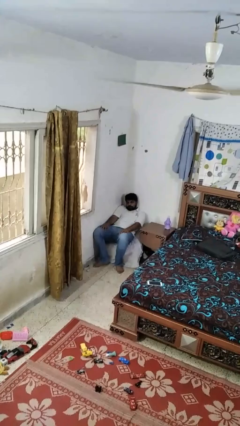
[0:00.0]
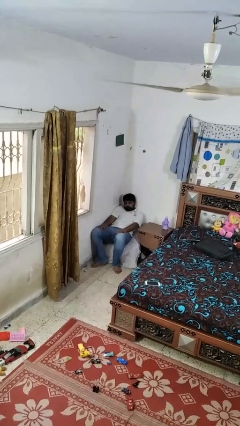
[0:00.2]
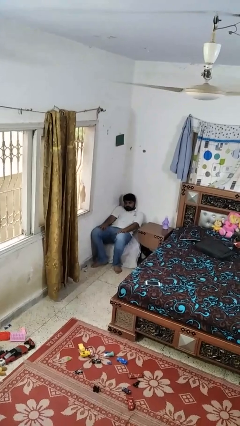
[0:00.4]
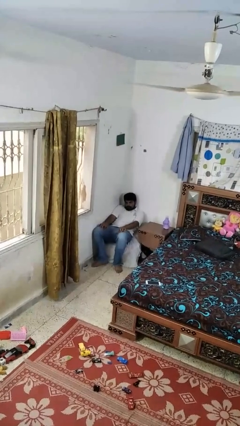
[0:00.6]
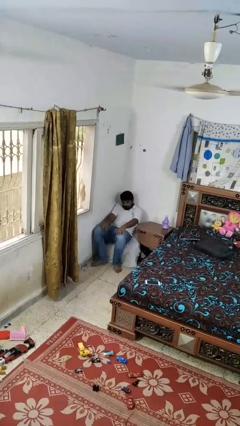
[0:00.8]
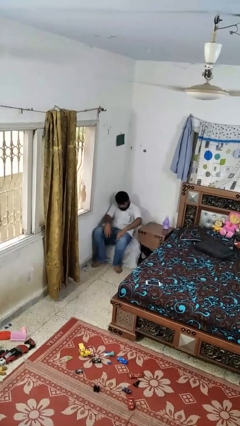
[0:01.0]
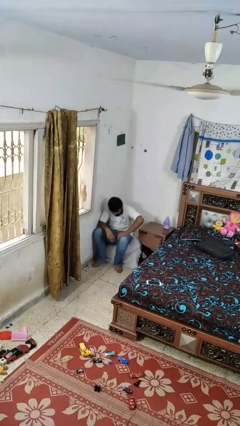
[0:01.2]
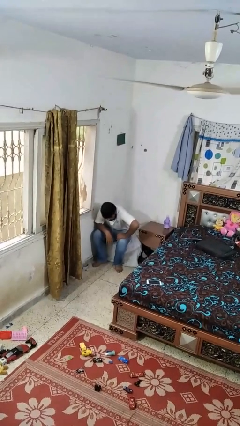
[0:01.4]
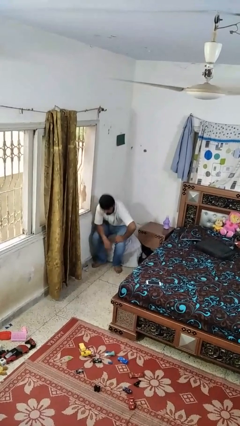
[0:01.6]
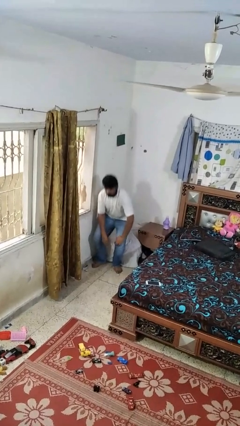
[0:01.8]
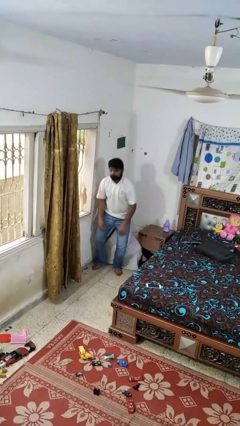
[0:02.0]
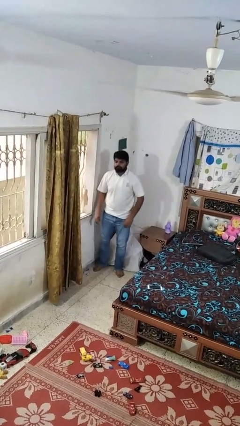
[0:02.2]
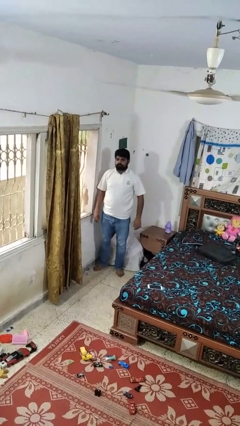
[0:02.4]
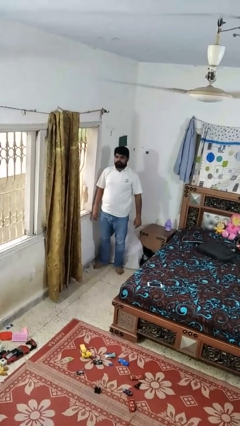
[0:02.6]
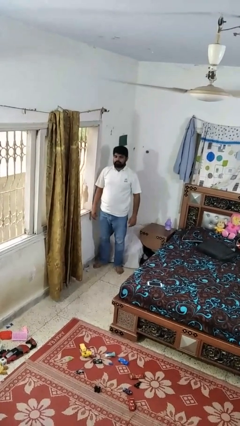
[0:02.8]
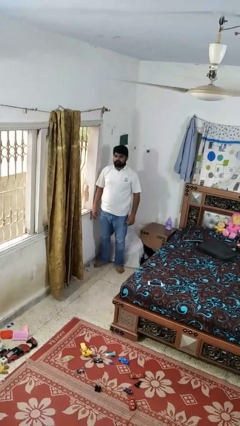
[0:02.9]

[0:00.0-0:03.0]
person stands up

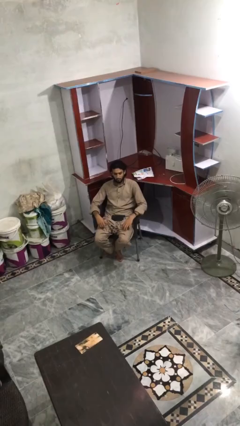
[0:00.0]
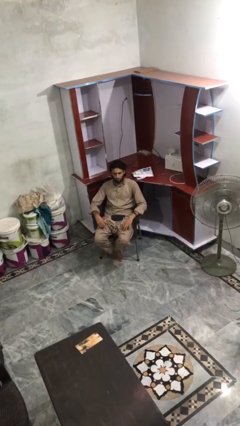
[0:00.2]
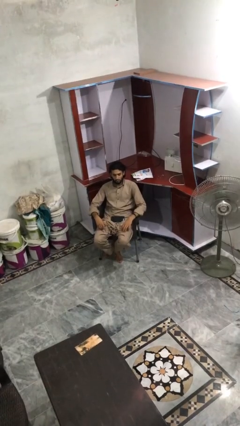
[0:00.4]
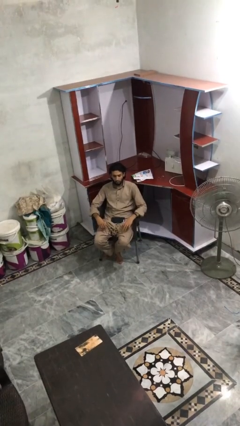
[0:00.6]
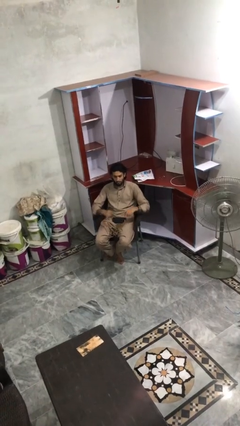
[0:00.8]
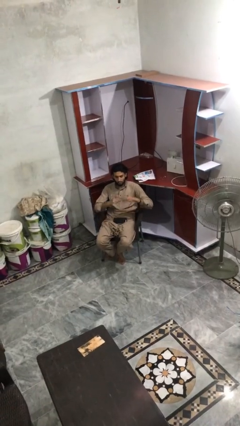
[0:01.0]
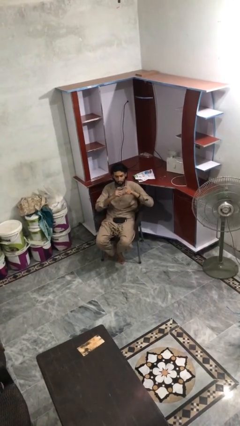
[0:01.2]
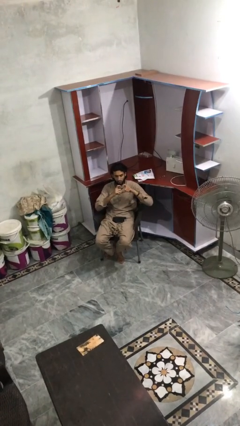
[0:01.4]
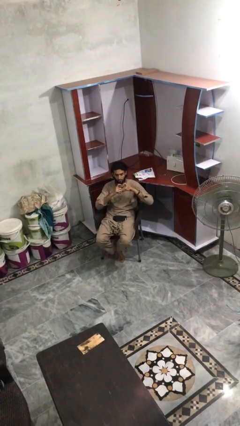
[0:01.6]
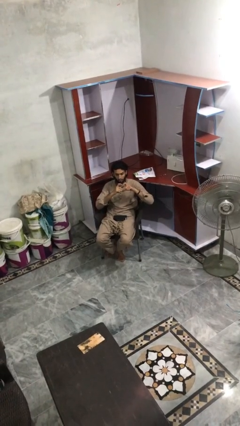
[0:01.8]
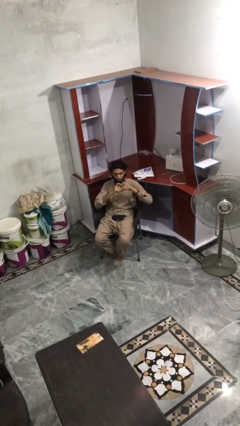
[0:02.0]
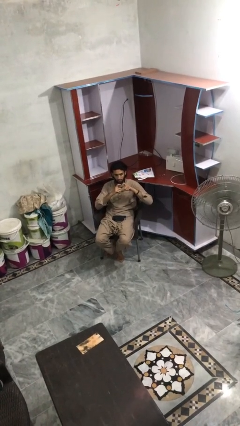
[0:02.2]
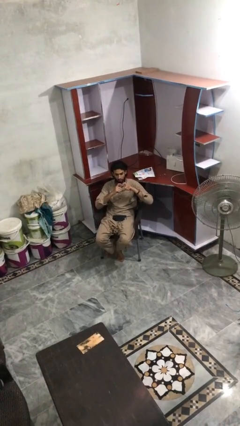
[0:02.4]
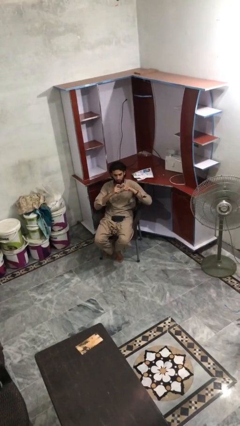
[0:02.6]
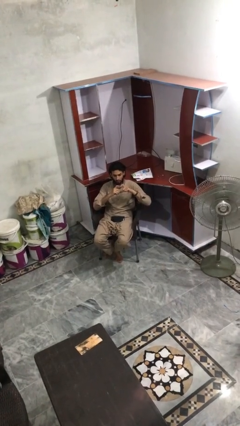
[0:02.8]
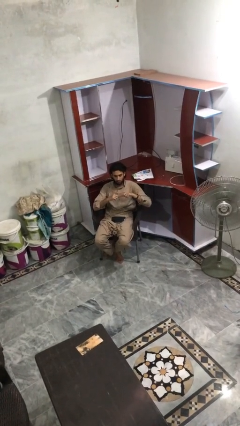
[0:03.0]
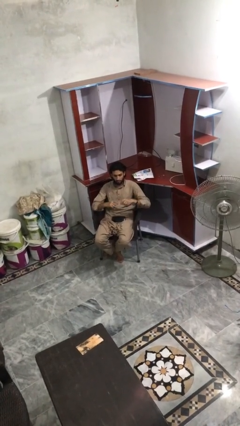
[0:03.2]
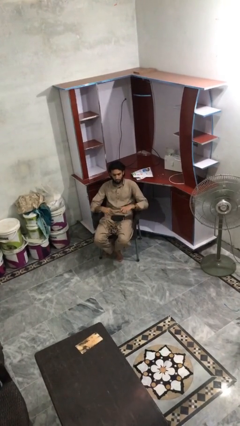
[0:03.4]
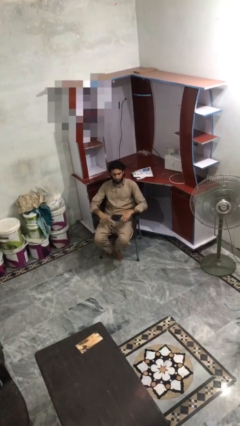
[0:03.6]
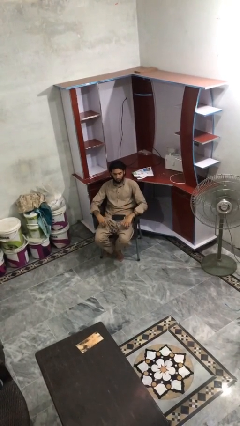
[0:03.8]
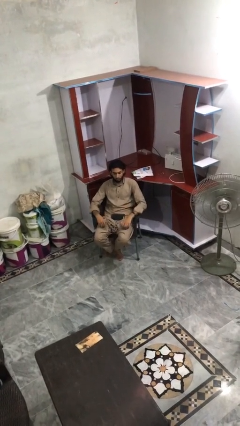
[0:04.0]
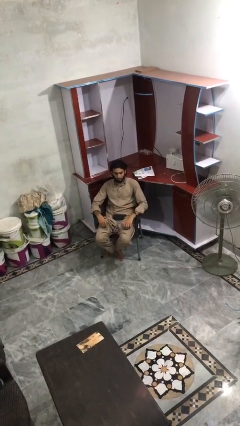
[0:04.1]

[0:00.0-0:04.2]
person gestures heart

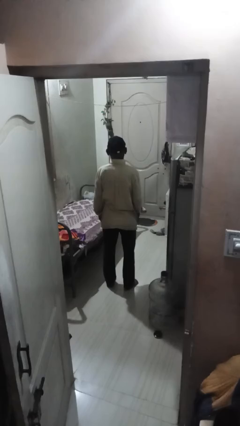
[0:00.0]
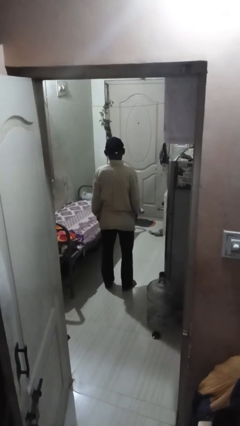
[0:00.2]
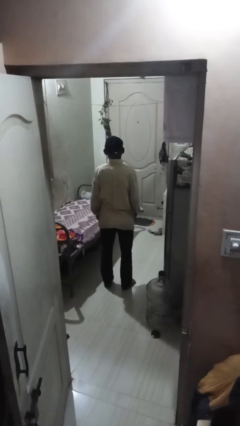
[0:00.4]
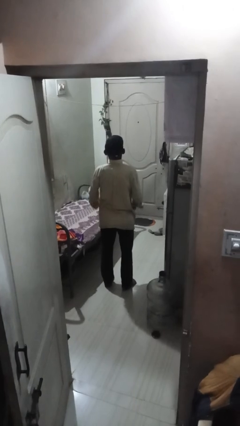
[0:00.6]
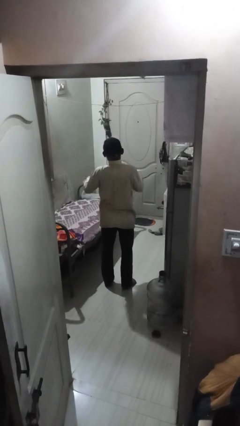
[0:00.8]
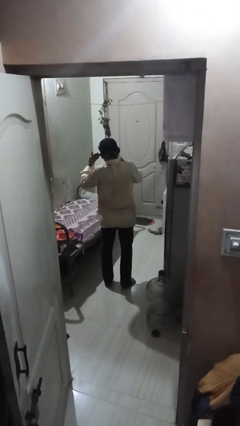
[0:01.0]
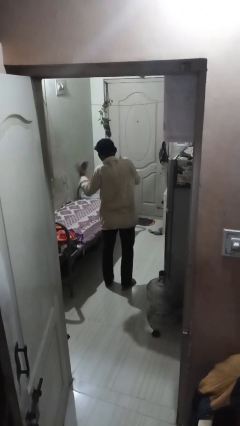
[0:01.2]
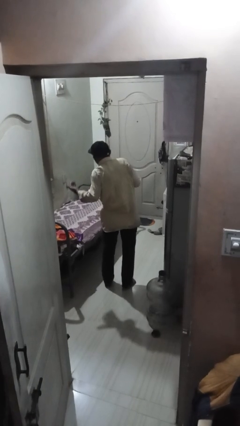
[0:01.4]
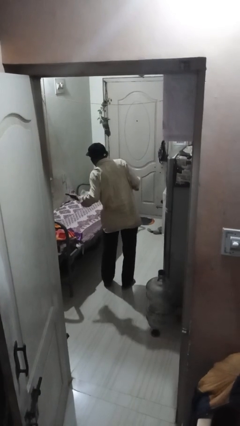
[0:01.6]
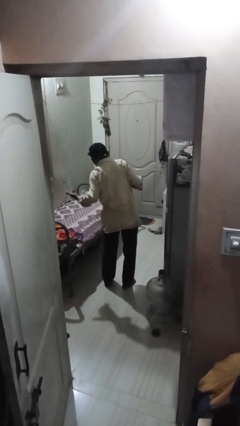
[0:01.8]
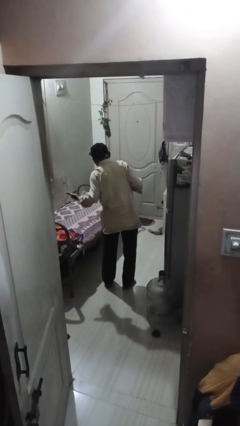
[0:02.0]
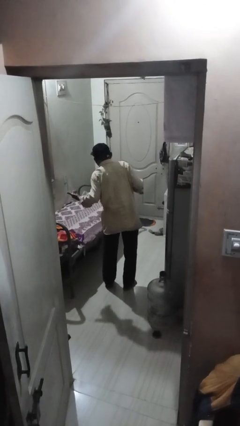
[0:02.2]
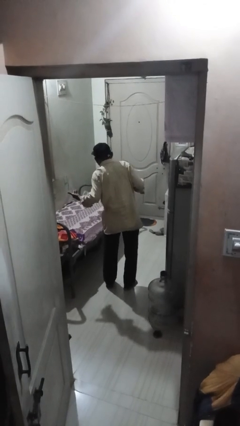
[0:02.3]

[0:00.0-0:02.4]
person shrugs

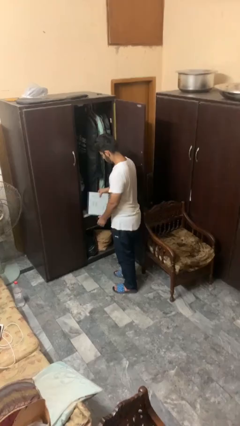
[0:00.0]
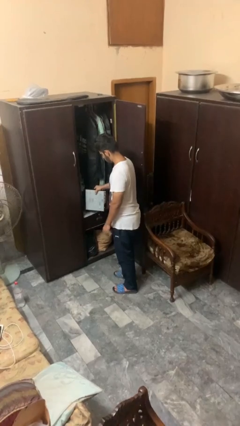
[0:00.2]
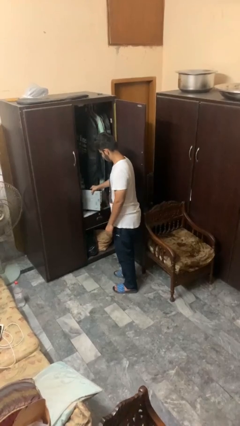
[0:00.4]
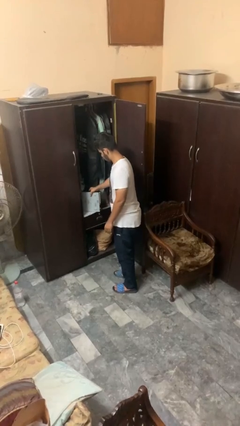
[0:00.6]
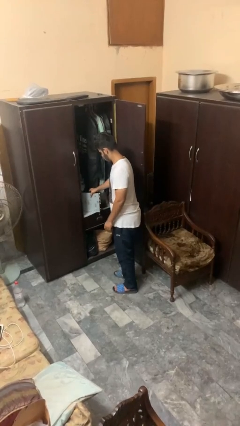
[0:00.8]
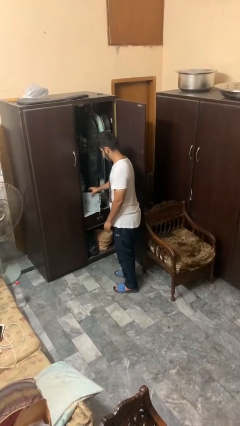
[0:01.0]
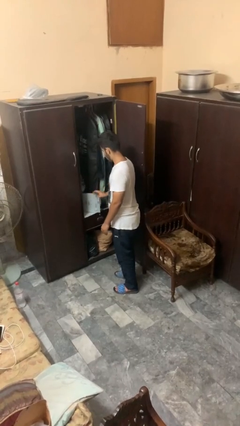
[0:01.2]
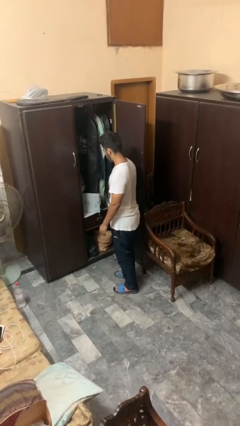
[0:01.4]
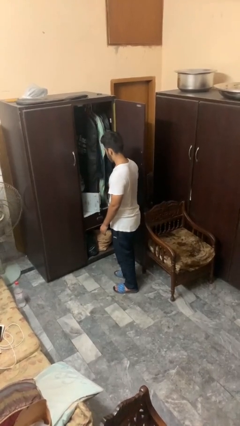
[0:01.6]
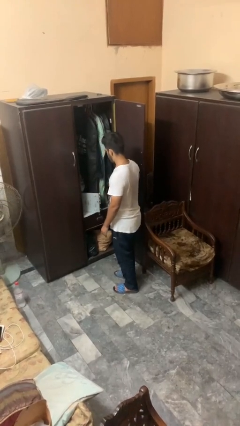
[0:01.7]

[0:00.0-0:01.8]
person puts down object on countertop

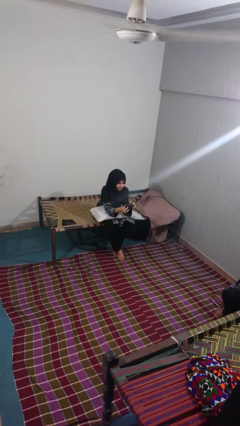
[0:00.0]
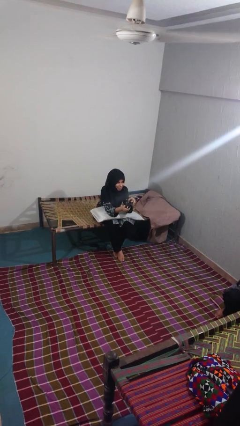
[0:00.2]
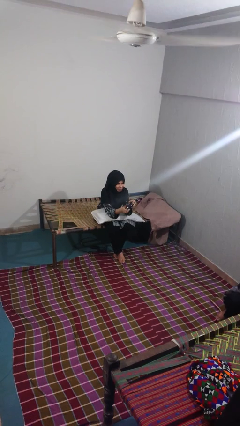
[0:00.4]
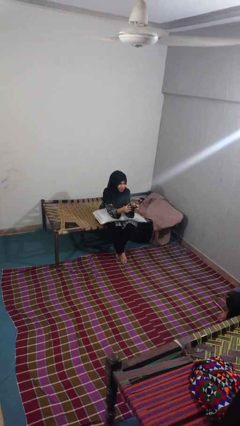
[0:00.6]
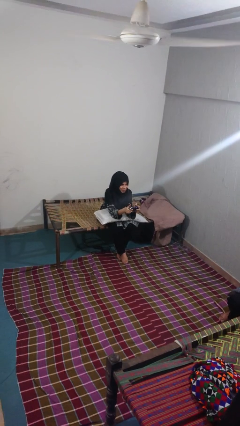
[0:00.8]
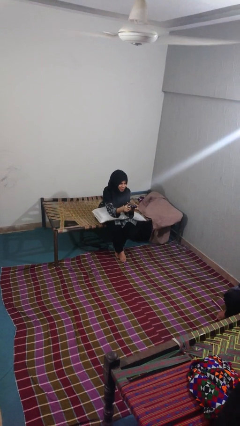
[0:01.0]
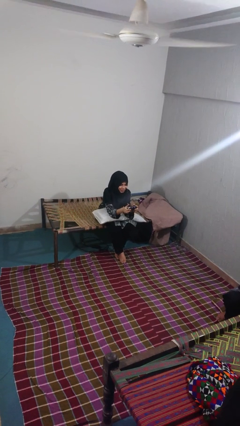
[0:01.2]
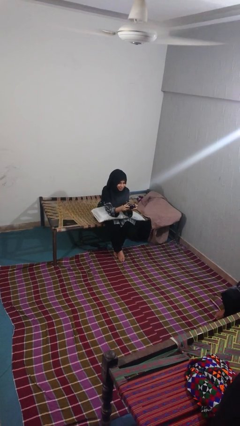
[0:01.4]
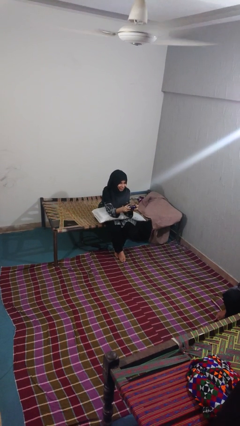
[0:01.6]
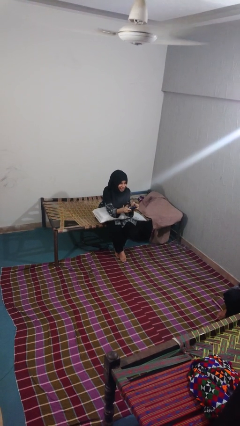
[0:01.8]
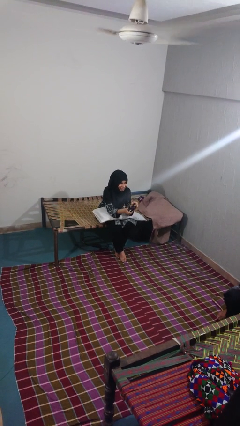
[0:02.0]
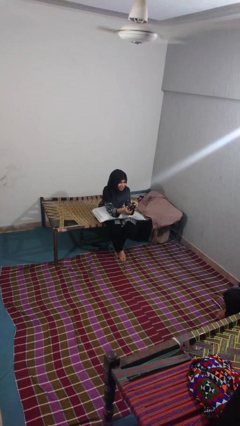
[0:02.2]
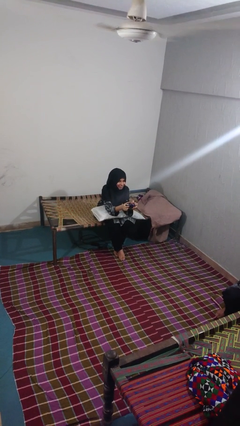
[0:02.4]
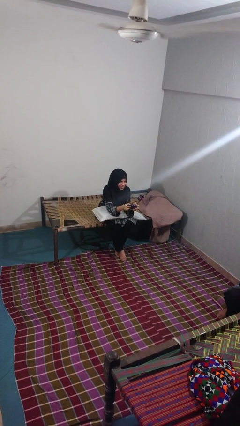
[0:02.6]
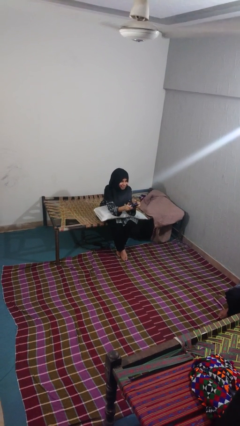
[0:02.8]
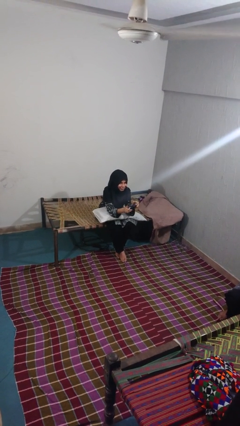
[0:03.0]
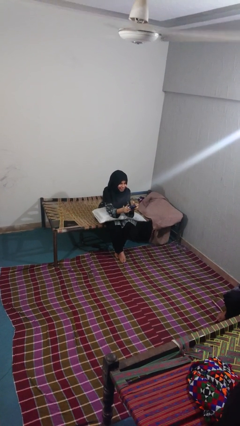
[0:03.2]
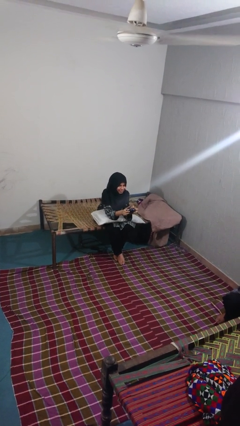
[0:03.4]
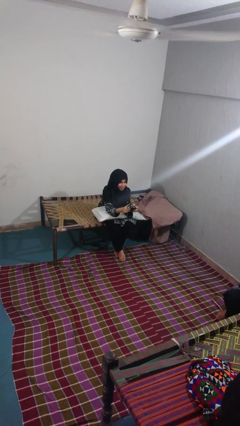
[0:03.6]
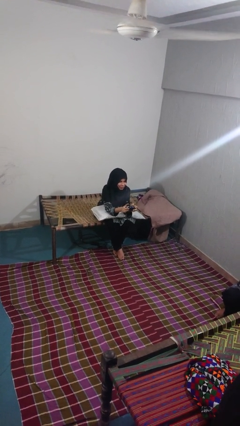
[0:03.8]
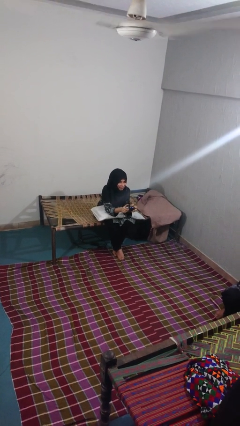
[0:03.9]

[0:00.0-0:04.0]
person interacts with handheld game

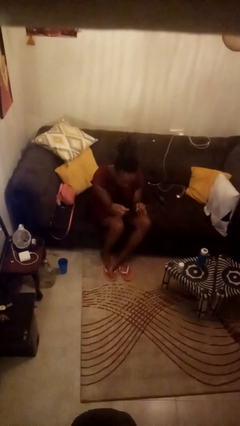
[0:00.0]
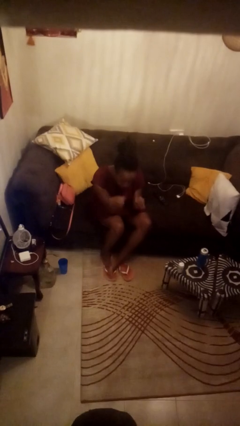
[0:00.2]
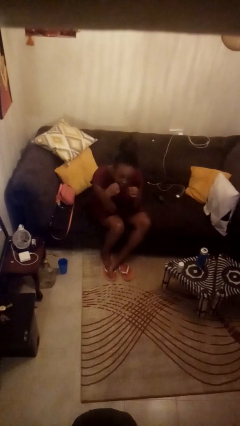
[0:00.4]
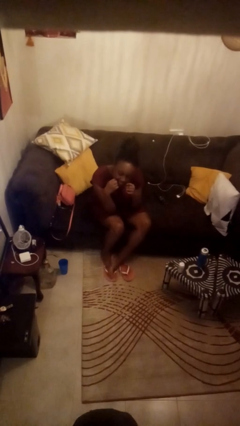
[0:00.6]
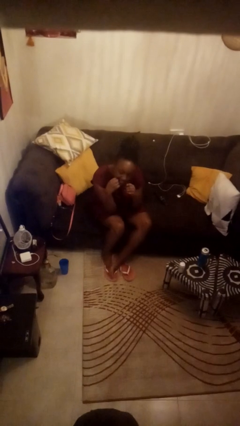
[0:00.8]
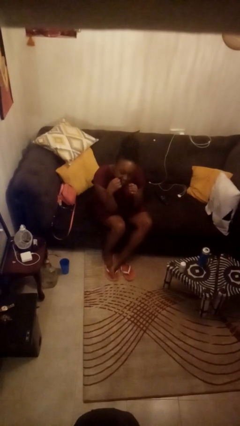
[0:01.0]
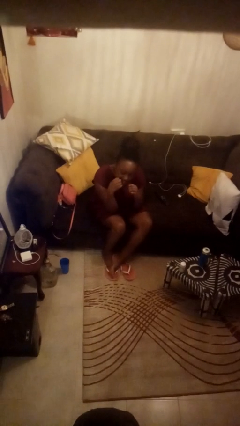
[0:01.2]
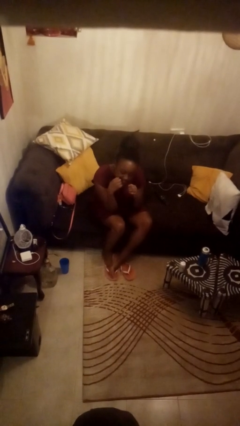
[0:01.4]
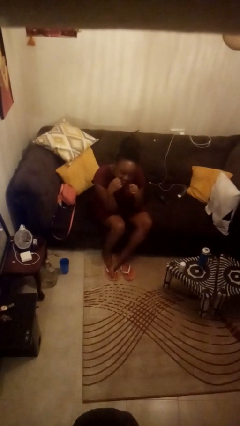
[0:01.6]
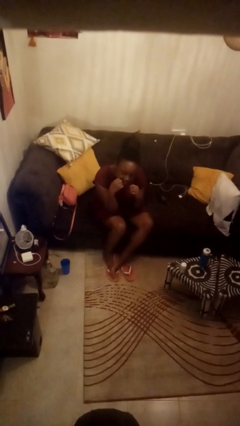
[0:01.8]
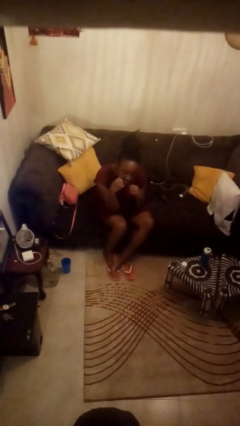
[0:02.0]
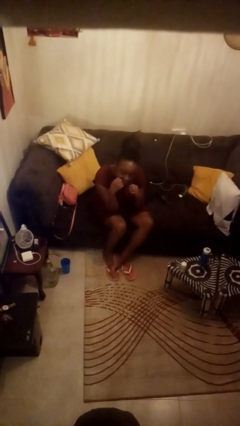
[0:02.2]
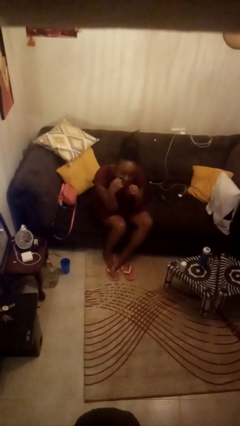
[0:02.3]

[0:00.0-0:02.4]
person flosses
